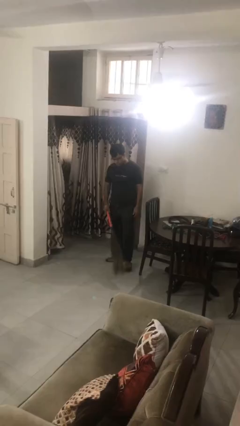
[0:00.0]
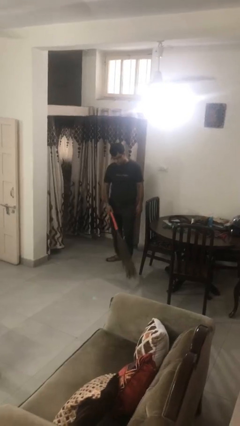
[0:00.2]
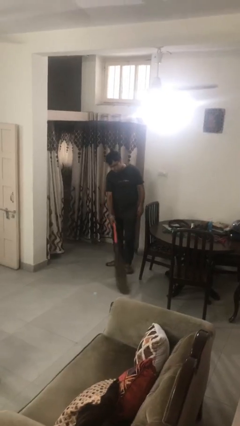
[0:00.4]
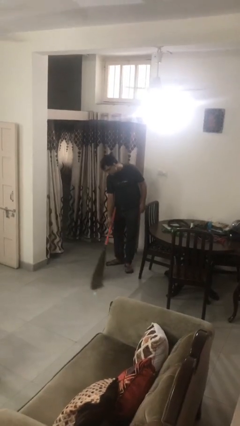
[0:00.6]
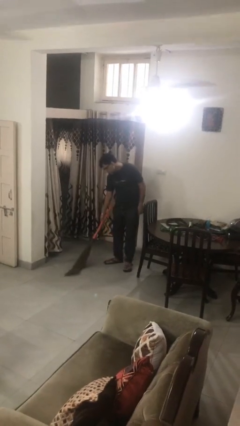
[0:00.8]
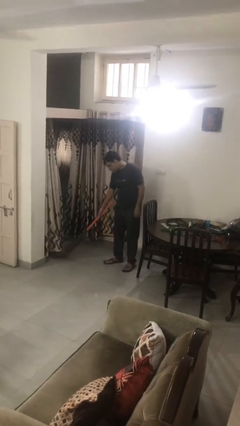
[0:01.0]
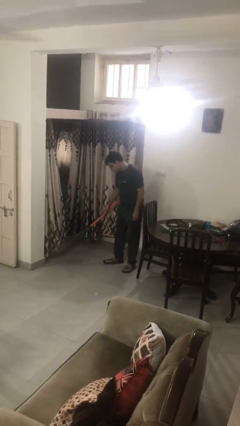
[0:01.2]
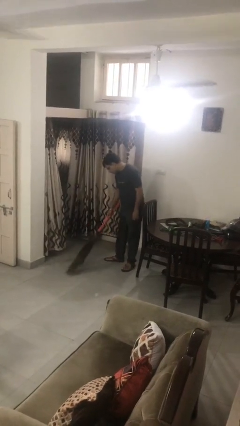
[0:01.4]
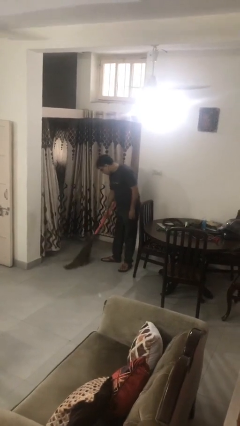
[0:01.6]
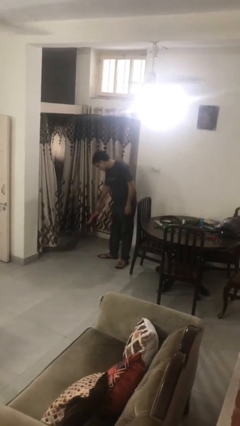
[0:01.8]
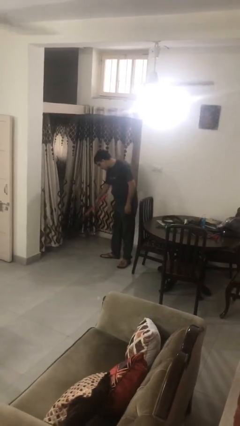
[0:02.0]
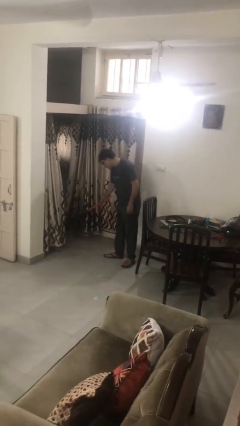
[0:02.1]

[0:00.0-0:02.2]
person sweeps floor

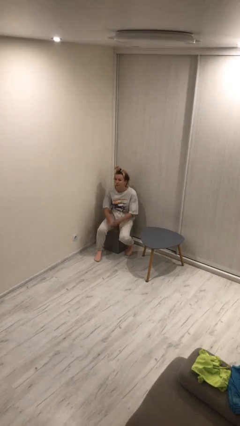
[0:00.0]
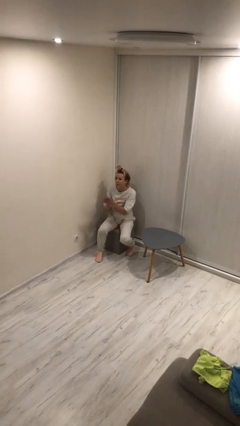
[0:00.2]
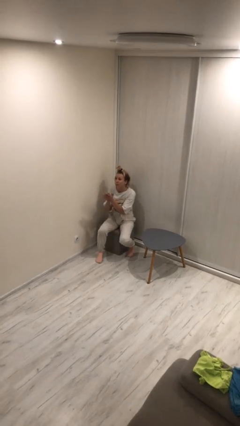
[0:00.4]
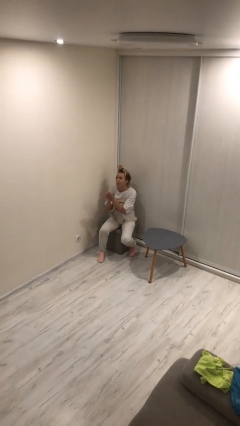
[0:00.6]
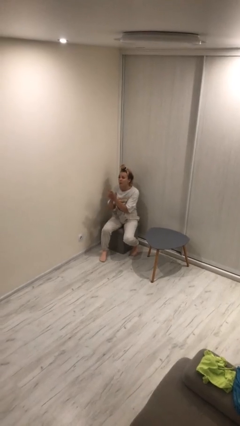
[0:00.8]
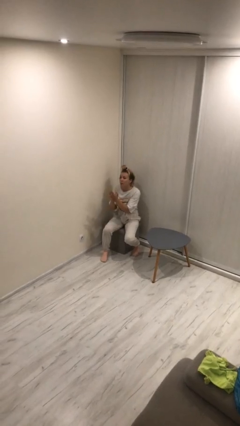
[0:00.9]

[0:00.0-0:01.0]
person claps hands

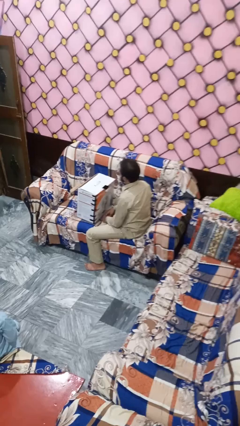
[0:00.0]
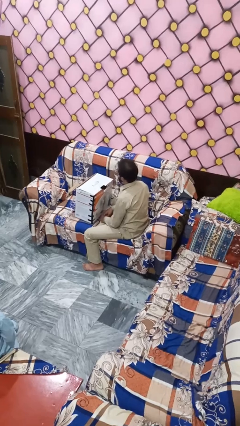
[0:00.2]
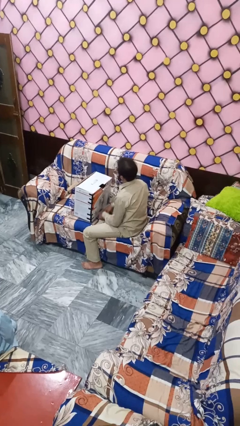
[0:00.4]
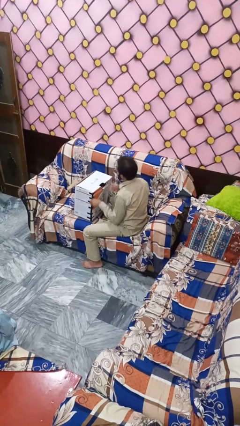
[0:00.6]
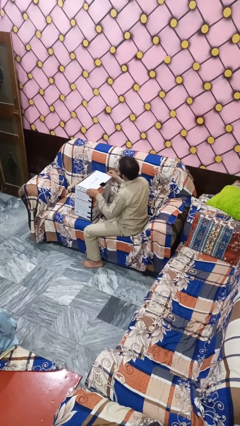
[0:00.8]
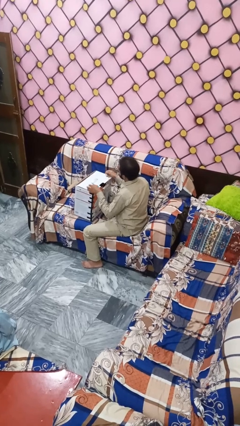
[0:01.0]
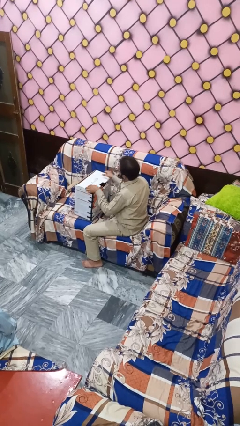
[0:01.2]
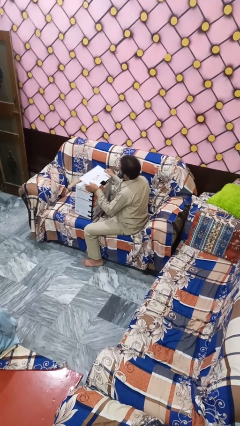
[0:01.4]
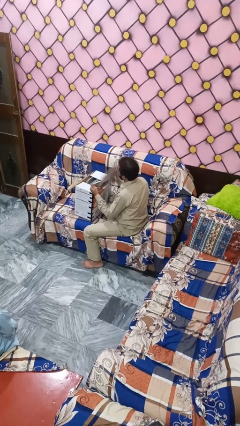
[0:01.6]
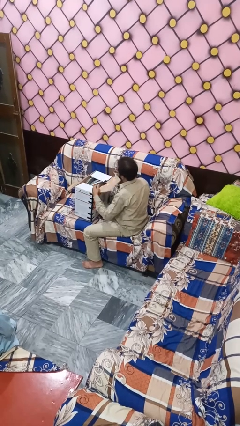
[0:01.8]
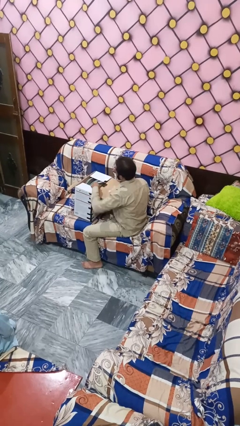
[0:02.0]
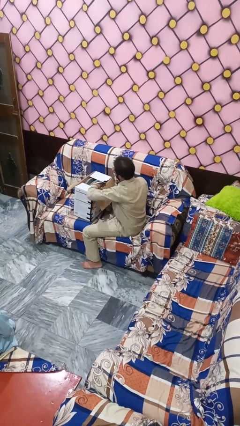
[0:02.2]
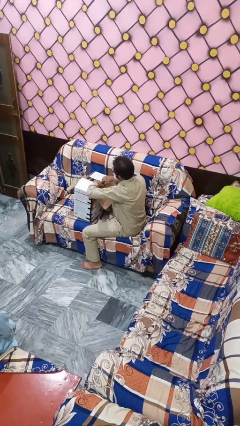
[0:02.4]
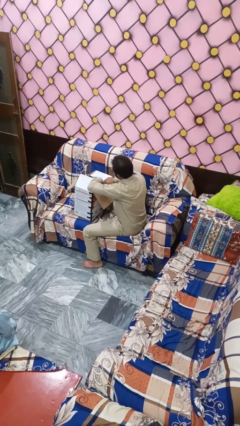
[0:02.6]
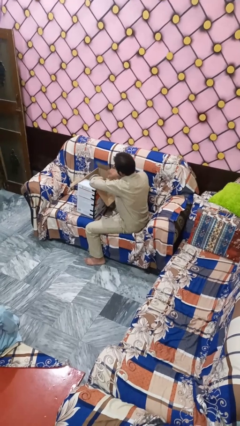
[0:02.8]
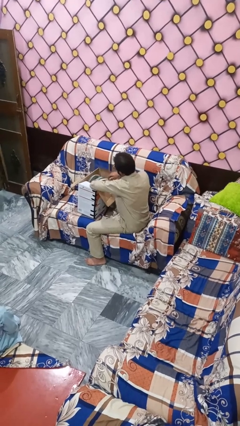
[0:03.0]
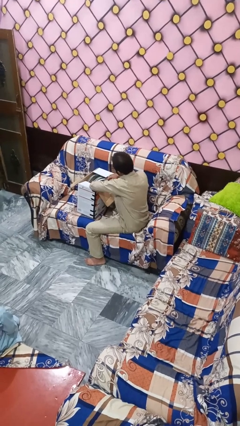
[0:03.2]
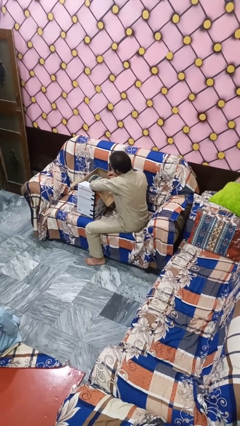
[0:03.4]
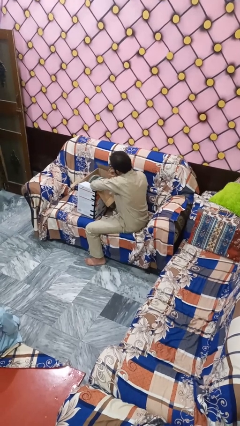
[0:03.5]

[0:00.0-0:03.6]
person searches in box

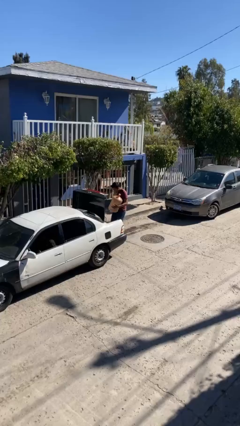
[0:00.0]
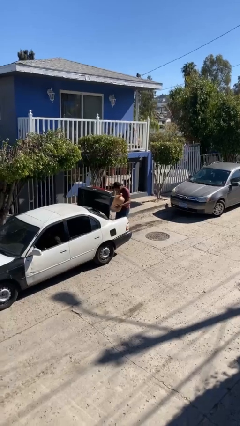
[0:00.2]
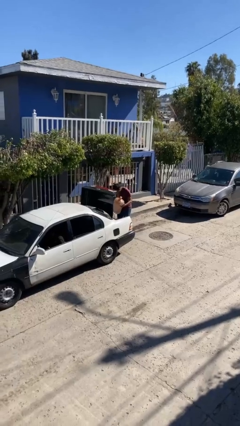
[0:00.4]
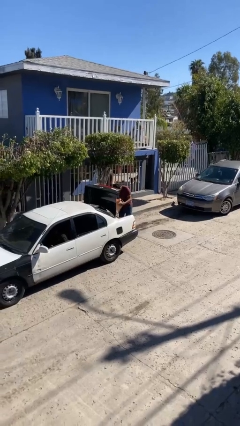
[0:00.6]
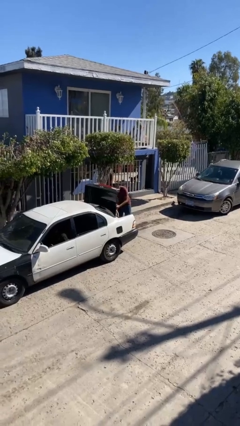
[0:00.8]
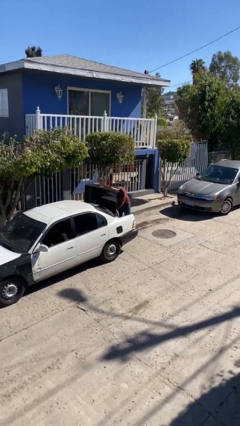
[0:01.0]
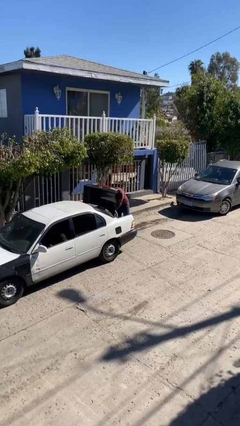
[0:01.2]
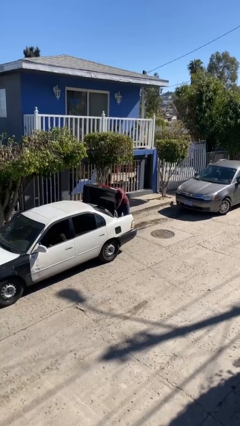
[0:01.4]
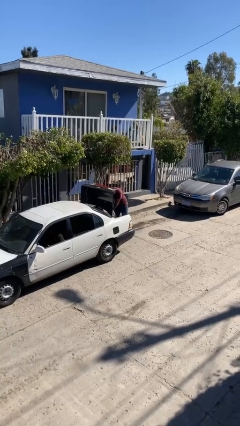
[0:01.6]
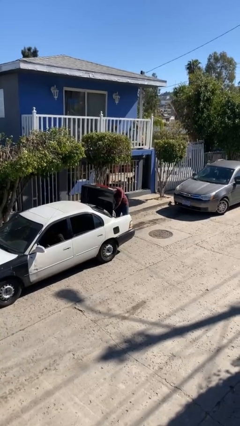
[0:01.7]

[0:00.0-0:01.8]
person loads car

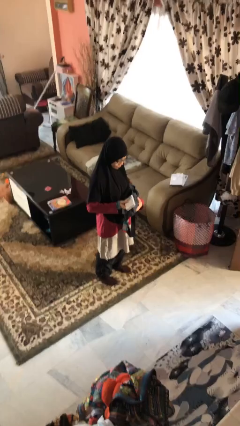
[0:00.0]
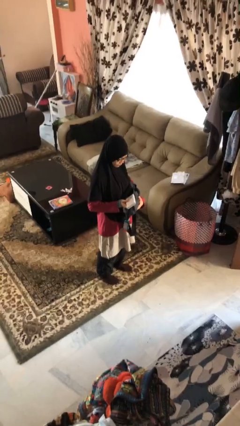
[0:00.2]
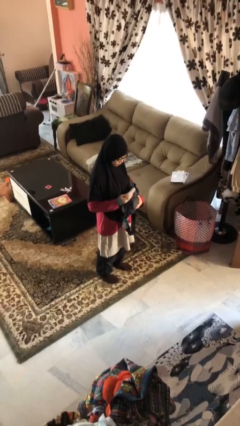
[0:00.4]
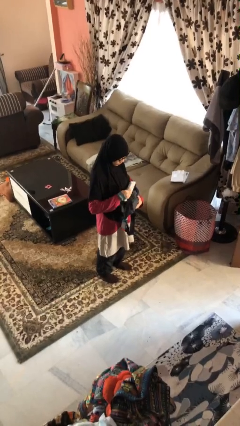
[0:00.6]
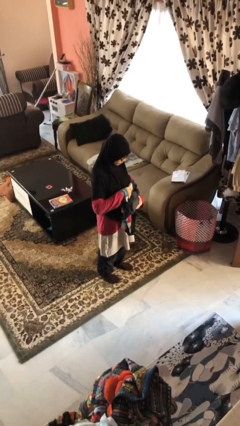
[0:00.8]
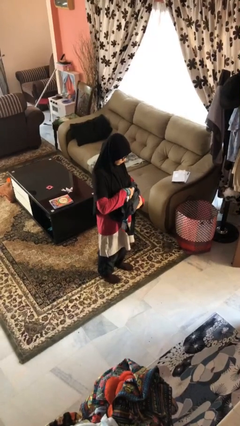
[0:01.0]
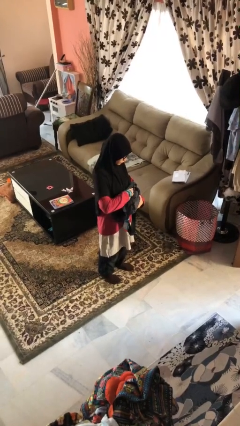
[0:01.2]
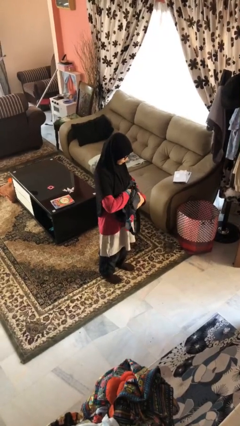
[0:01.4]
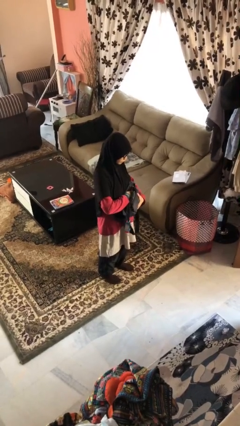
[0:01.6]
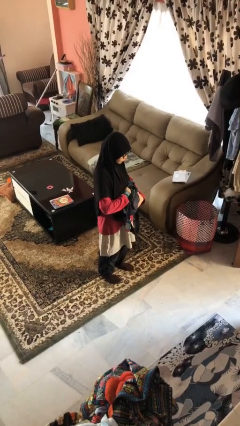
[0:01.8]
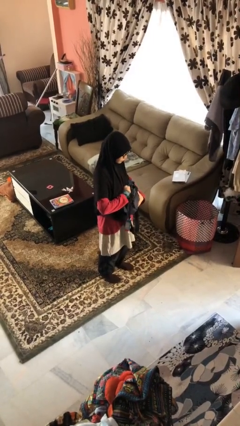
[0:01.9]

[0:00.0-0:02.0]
person puts object into purse

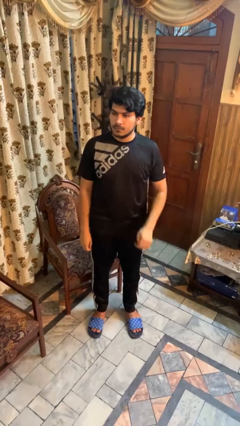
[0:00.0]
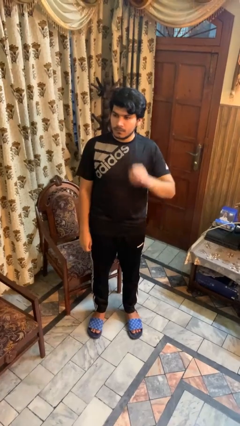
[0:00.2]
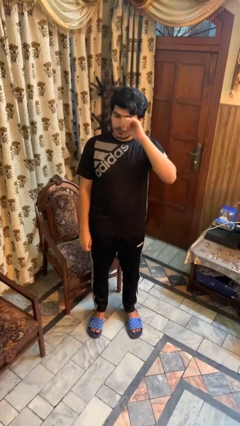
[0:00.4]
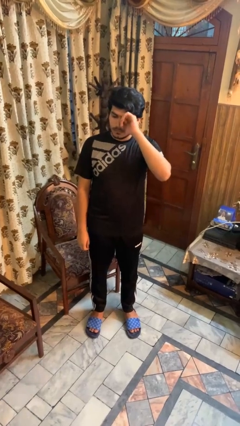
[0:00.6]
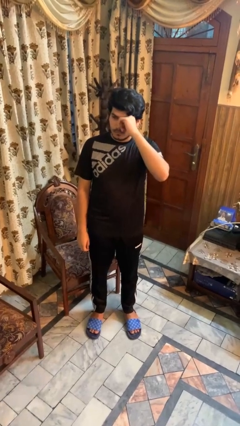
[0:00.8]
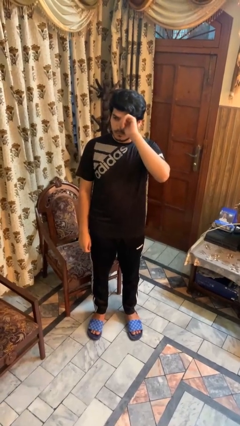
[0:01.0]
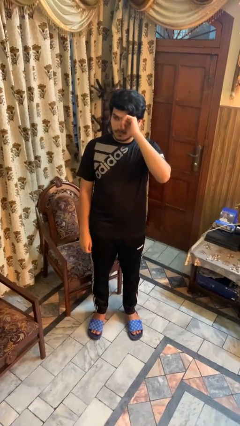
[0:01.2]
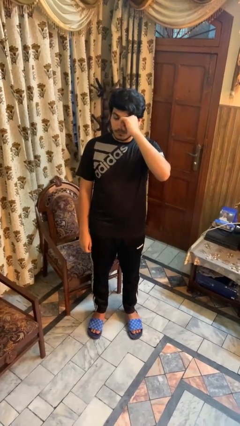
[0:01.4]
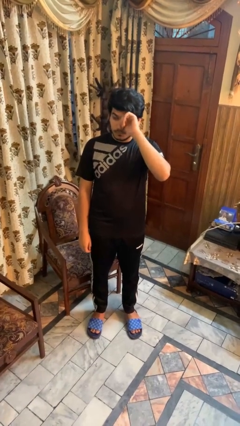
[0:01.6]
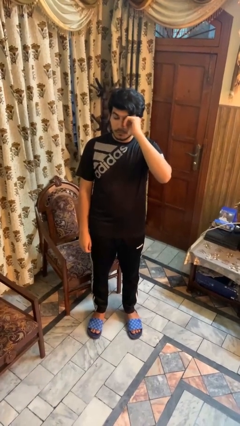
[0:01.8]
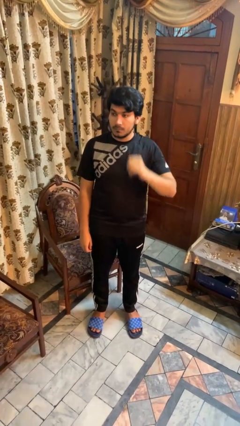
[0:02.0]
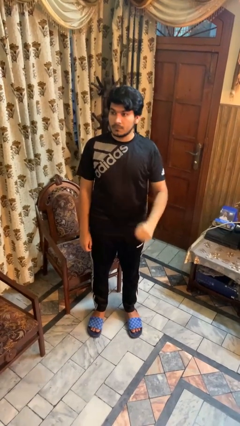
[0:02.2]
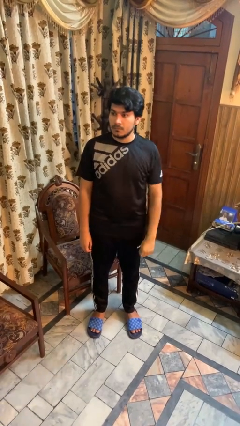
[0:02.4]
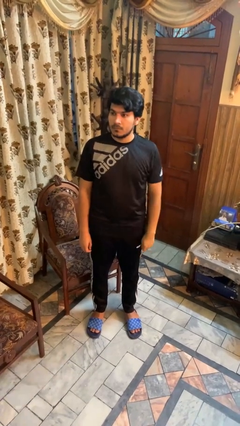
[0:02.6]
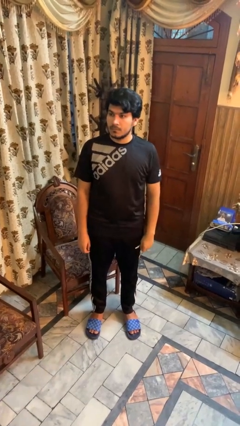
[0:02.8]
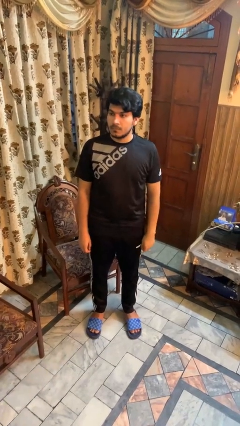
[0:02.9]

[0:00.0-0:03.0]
person rubs eyes

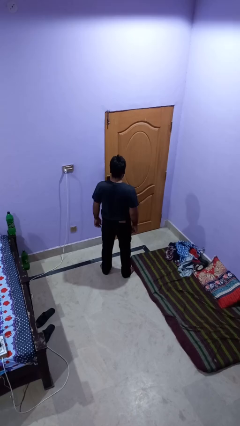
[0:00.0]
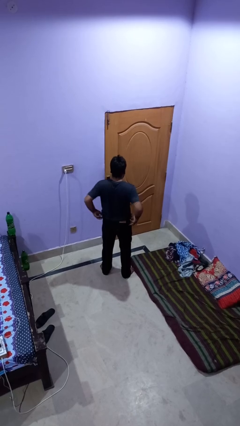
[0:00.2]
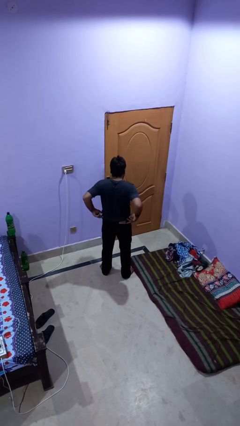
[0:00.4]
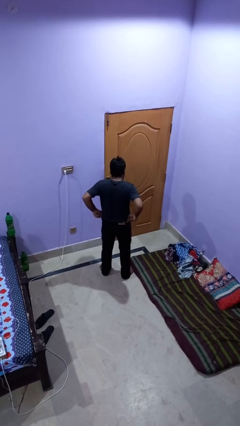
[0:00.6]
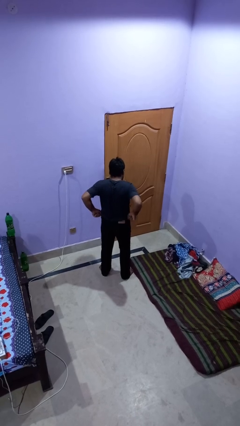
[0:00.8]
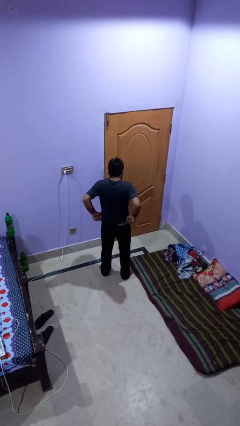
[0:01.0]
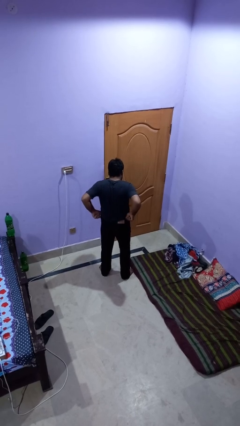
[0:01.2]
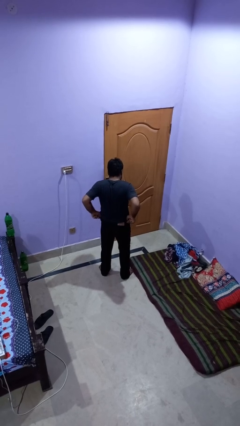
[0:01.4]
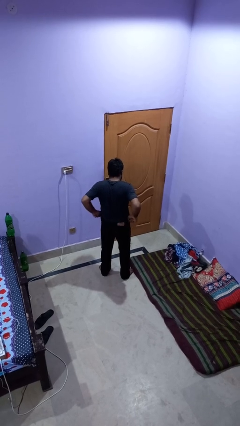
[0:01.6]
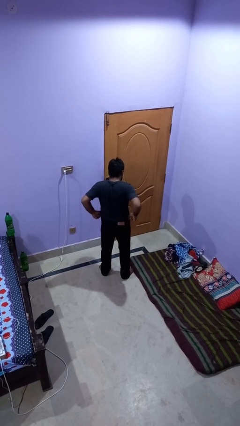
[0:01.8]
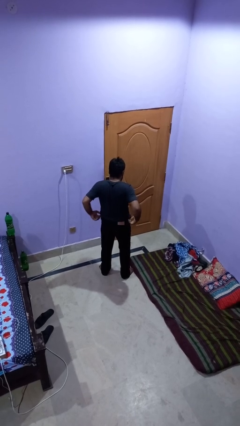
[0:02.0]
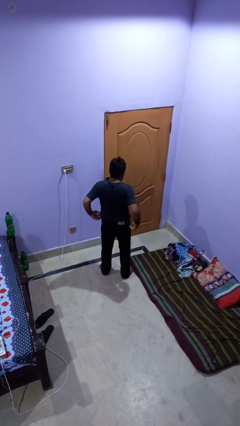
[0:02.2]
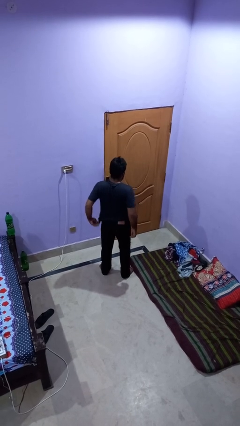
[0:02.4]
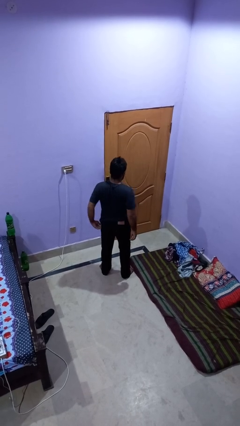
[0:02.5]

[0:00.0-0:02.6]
person hikes up pants

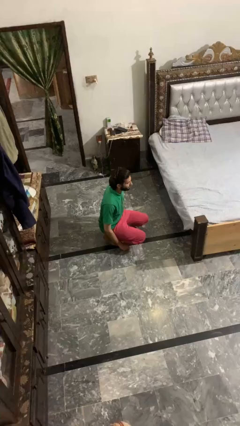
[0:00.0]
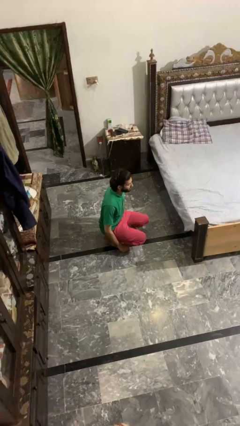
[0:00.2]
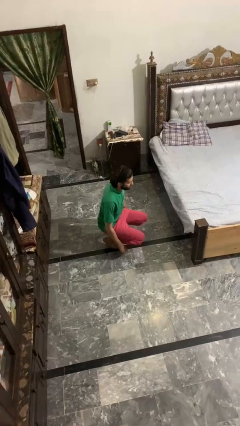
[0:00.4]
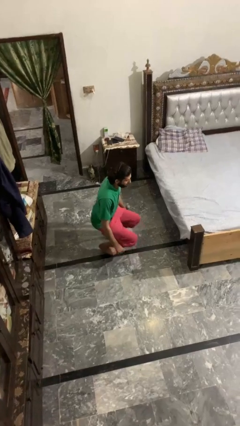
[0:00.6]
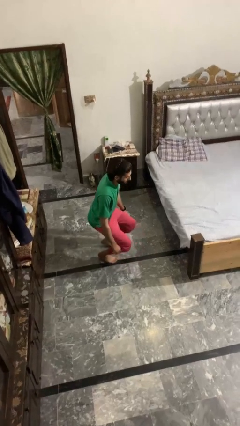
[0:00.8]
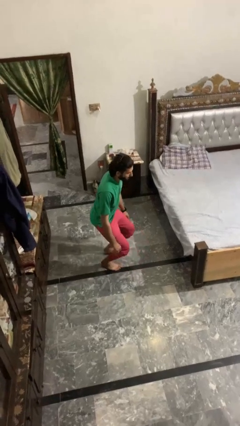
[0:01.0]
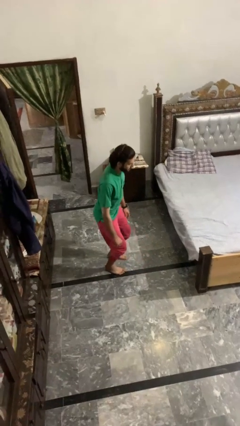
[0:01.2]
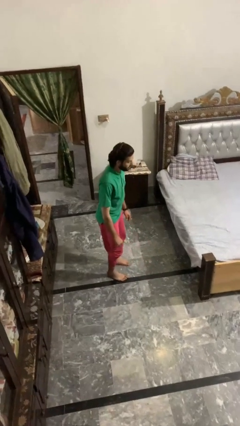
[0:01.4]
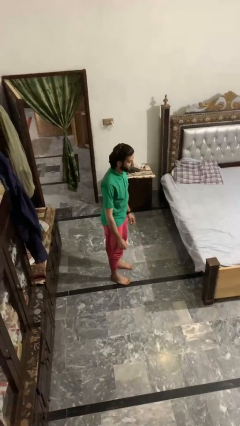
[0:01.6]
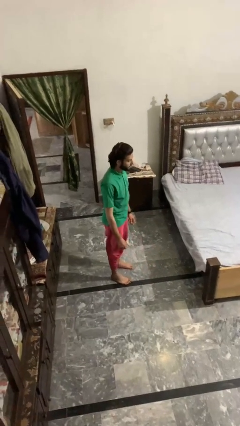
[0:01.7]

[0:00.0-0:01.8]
person stands up
